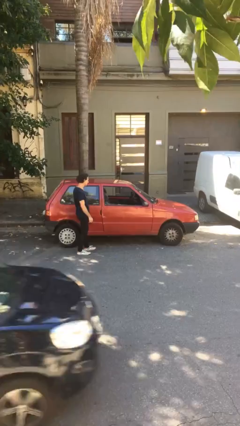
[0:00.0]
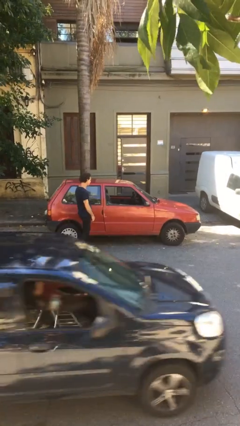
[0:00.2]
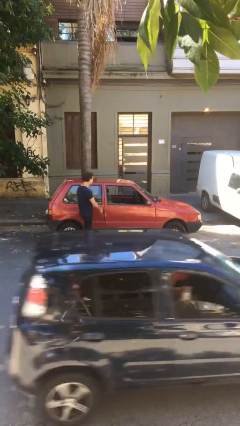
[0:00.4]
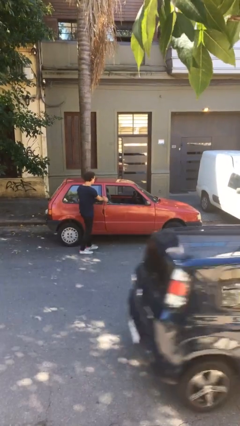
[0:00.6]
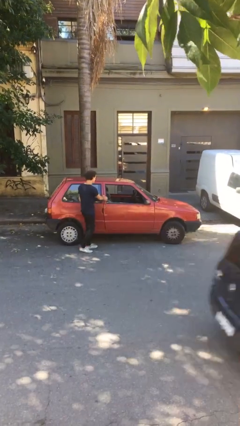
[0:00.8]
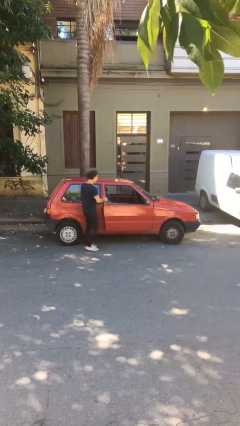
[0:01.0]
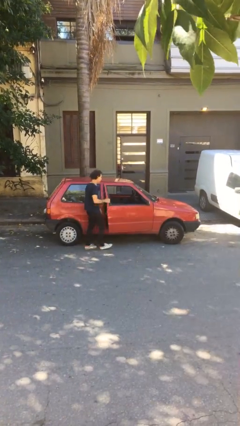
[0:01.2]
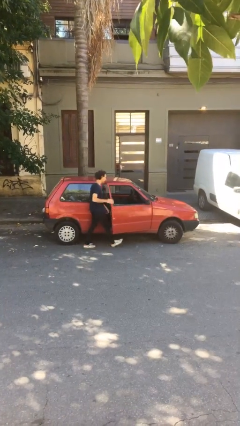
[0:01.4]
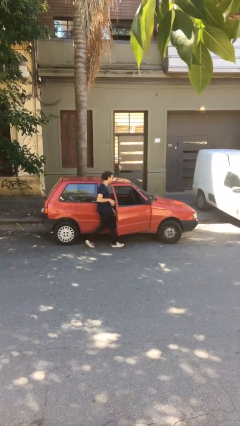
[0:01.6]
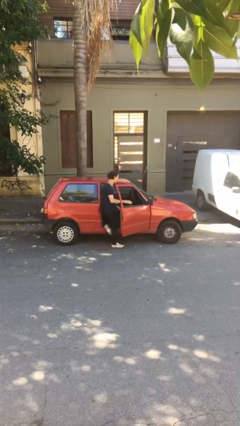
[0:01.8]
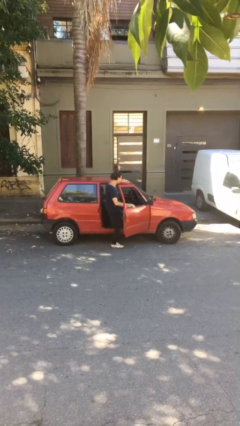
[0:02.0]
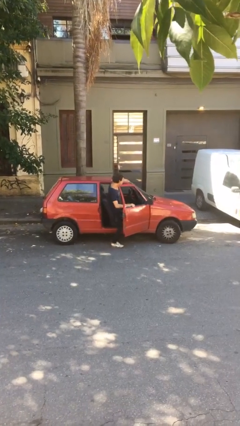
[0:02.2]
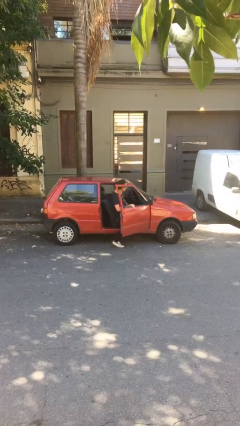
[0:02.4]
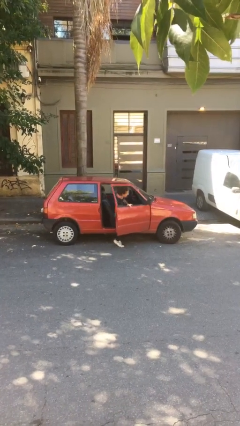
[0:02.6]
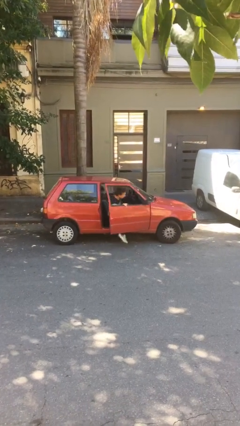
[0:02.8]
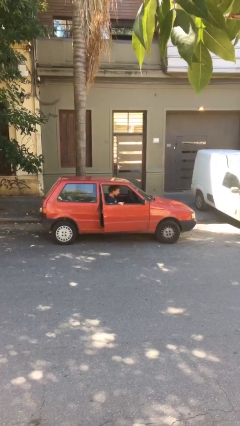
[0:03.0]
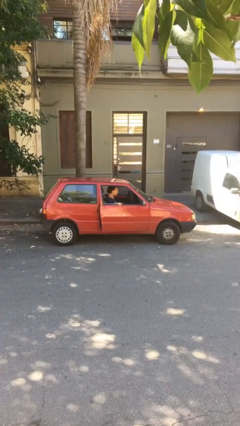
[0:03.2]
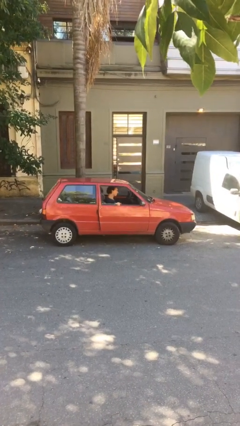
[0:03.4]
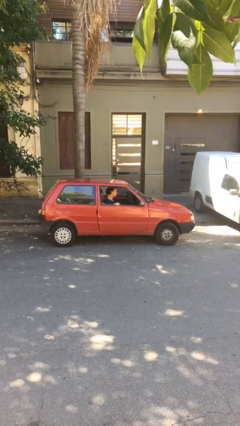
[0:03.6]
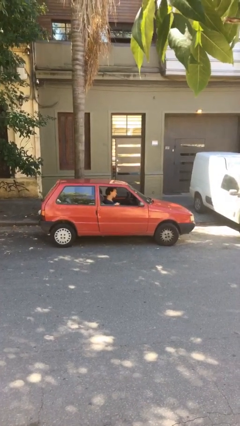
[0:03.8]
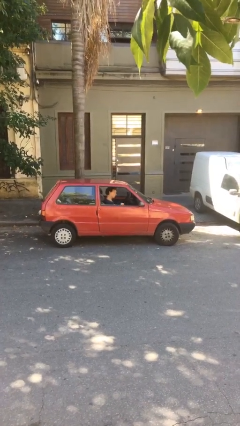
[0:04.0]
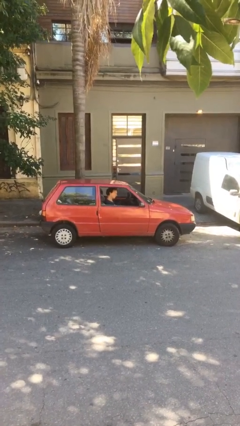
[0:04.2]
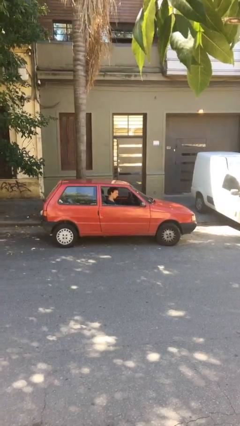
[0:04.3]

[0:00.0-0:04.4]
car picks up person

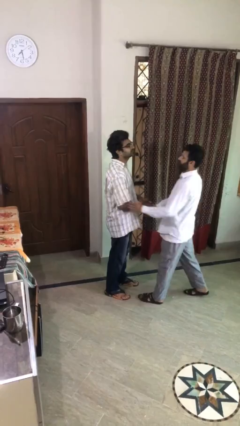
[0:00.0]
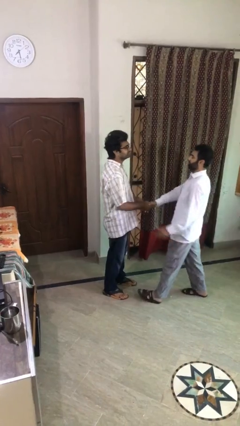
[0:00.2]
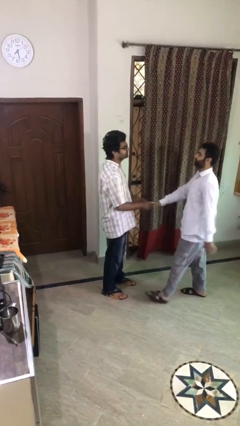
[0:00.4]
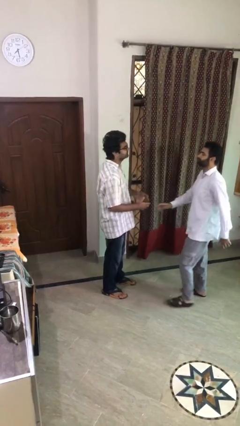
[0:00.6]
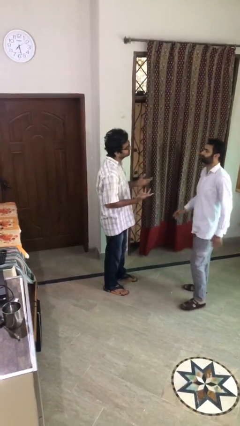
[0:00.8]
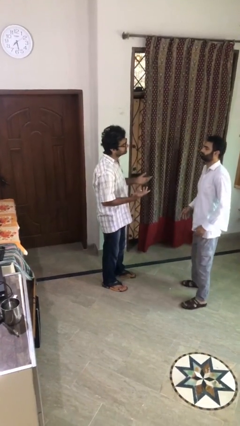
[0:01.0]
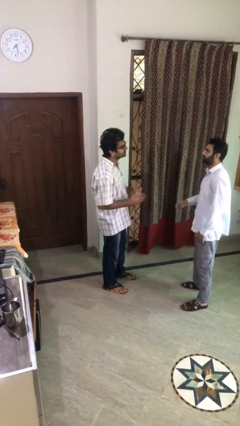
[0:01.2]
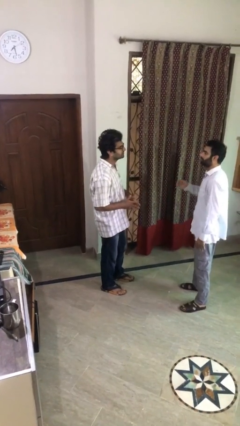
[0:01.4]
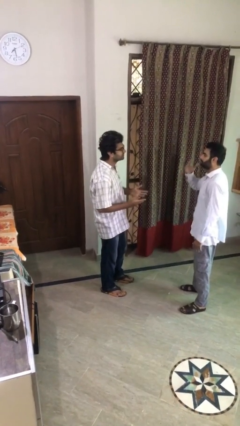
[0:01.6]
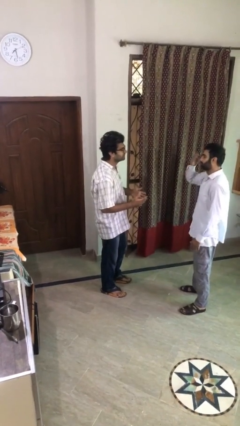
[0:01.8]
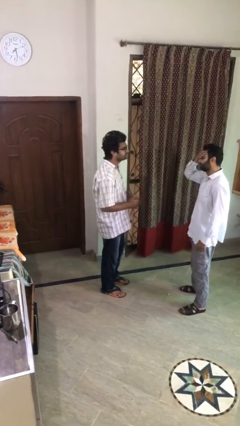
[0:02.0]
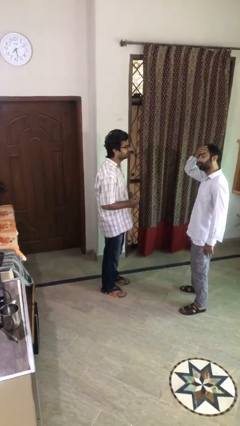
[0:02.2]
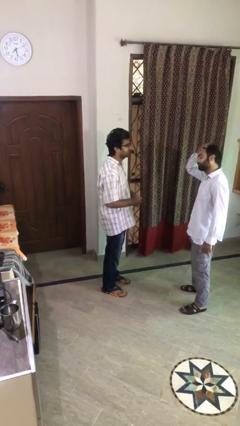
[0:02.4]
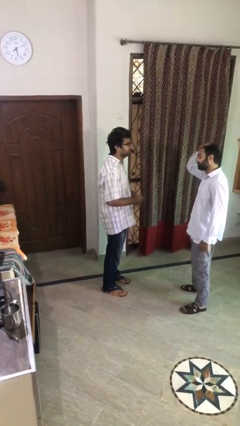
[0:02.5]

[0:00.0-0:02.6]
person talks to person

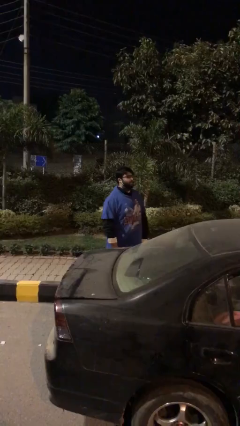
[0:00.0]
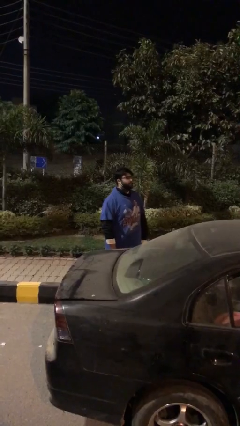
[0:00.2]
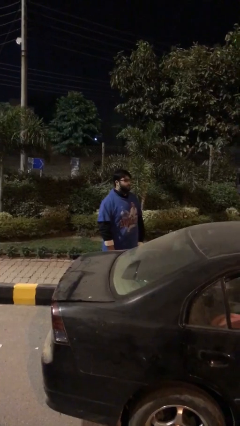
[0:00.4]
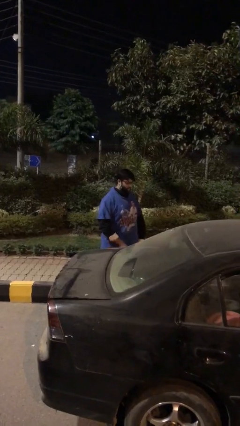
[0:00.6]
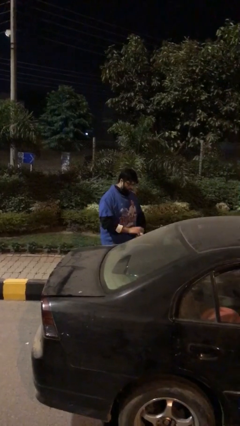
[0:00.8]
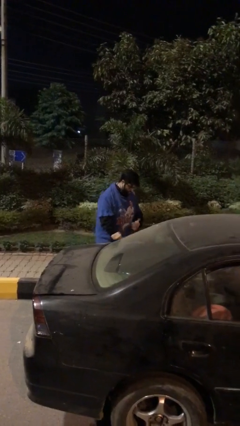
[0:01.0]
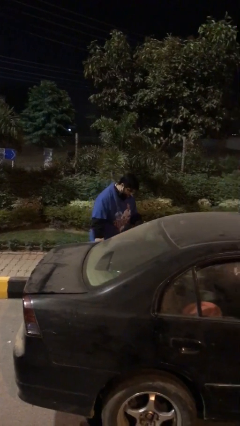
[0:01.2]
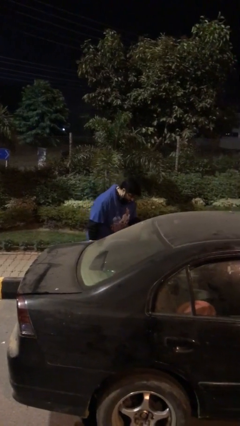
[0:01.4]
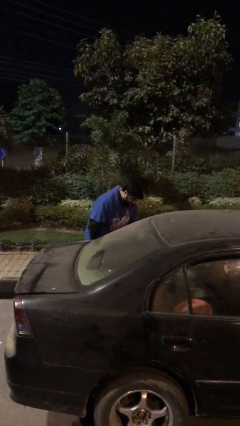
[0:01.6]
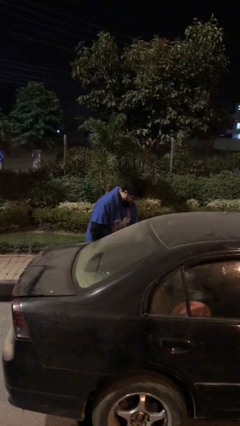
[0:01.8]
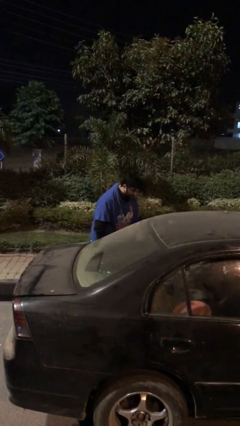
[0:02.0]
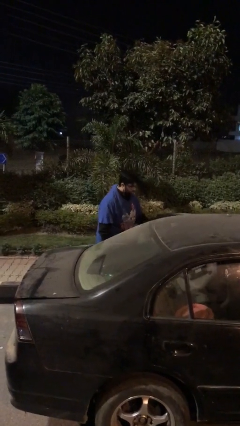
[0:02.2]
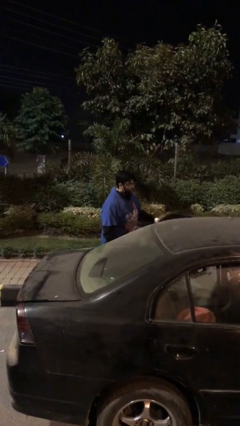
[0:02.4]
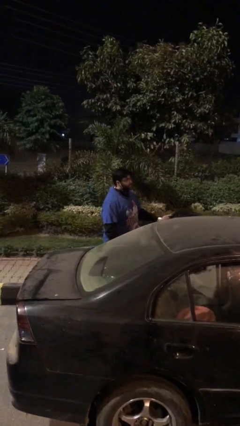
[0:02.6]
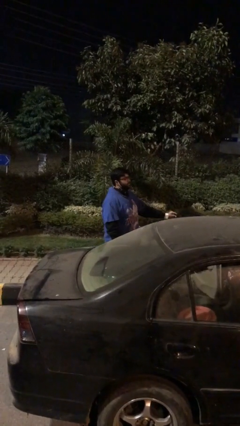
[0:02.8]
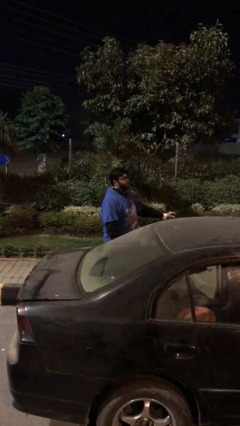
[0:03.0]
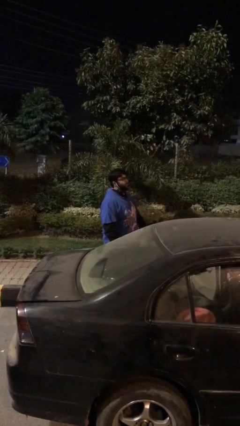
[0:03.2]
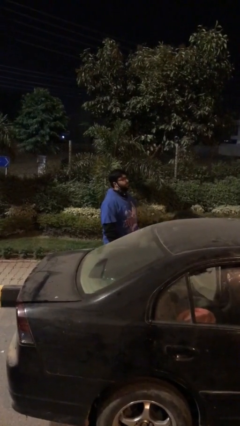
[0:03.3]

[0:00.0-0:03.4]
person opens car door

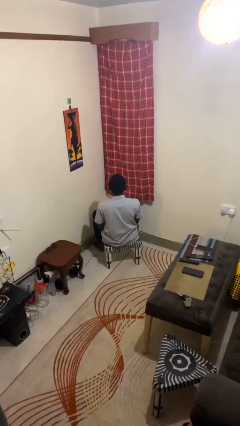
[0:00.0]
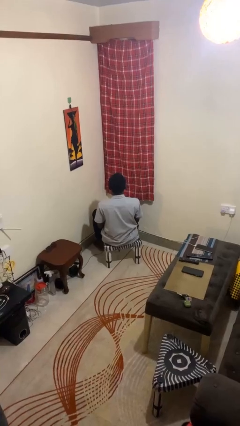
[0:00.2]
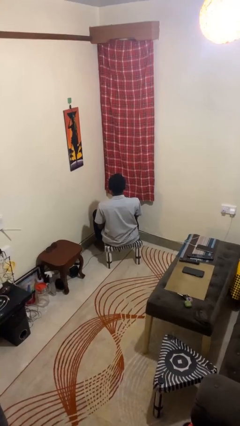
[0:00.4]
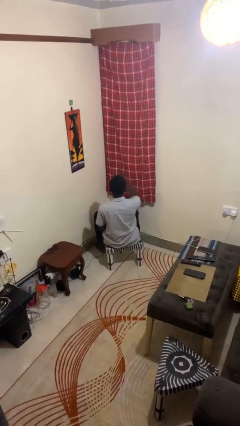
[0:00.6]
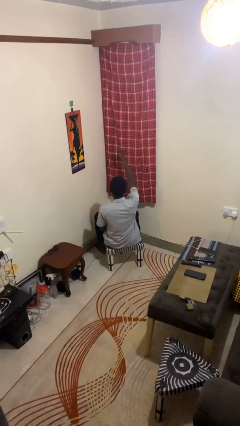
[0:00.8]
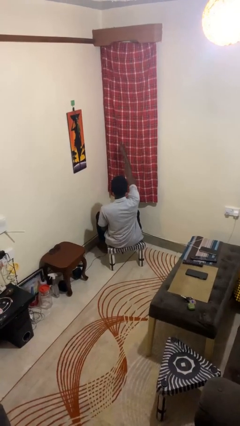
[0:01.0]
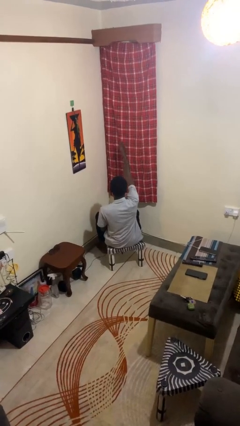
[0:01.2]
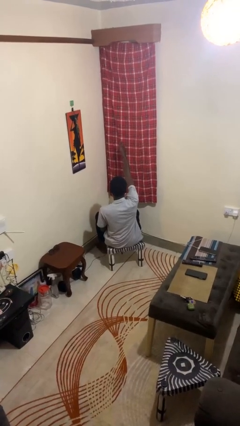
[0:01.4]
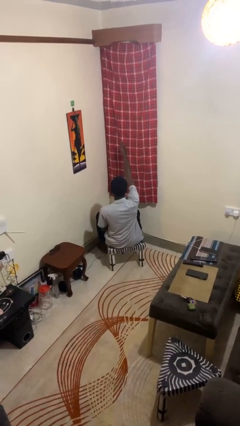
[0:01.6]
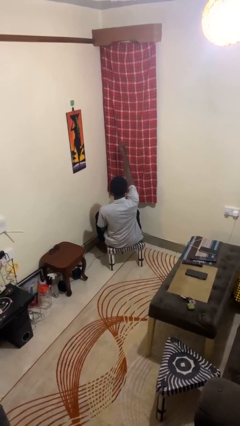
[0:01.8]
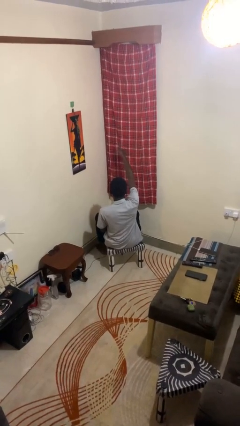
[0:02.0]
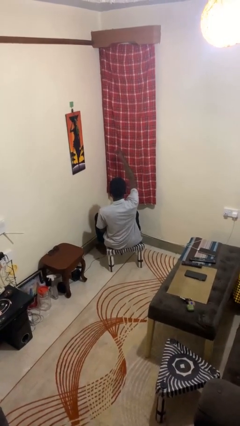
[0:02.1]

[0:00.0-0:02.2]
person gestures thumbs up

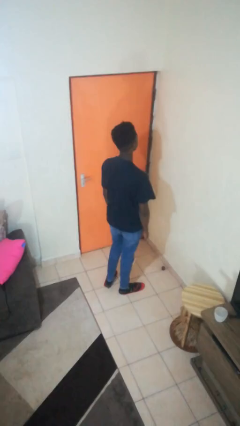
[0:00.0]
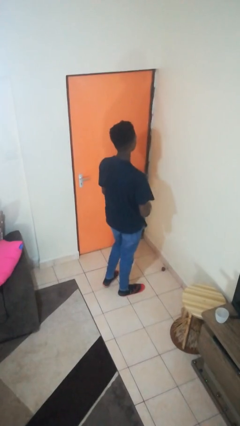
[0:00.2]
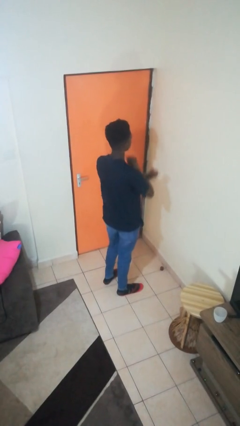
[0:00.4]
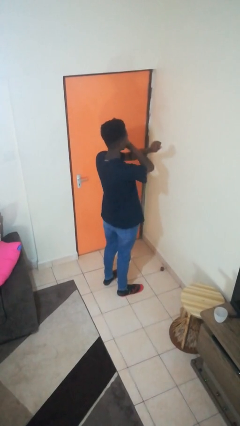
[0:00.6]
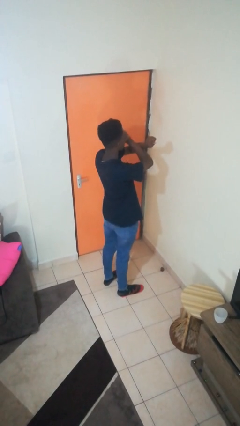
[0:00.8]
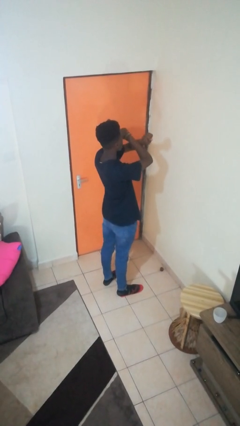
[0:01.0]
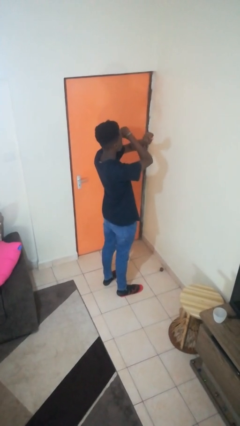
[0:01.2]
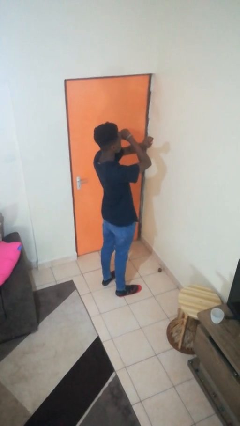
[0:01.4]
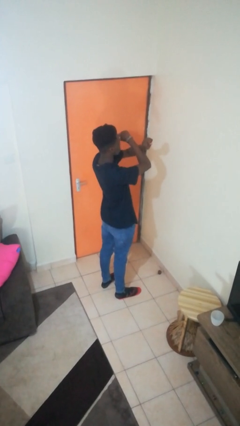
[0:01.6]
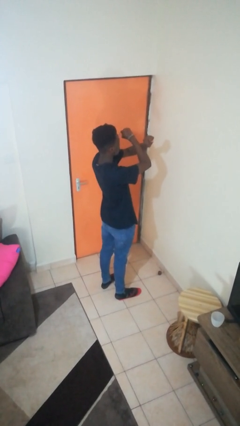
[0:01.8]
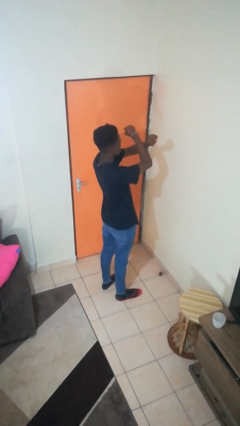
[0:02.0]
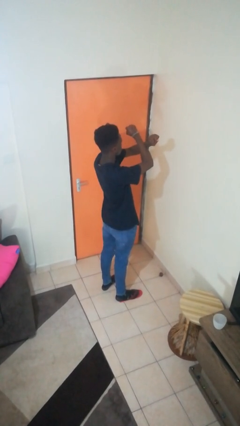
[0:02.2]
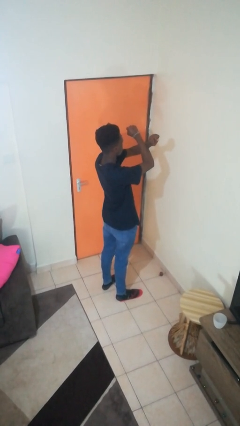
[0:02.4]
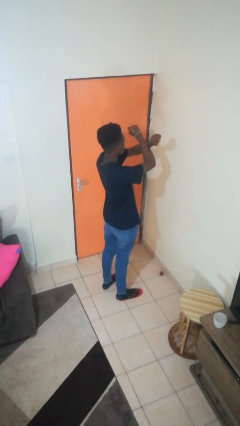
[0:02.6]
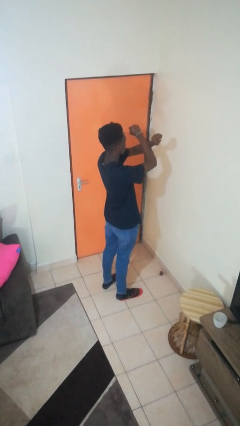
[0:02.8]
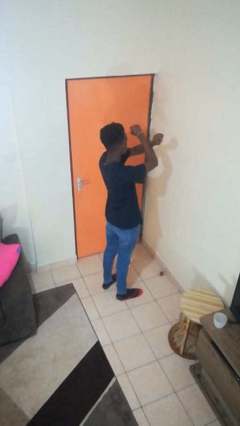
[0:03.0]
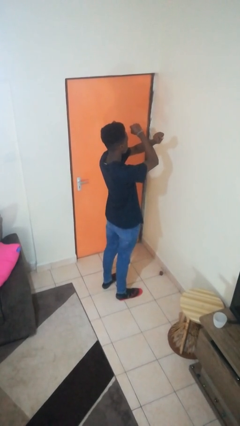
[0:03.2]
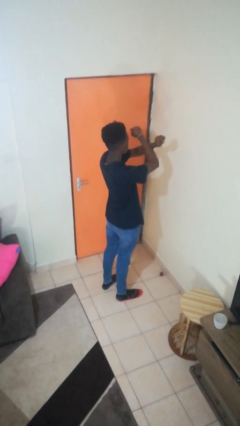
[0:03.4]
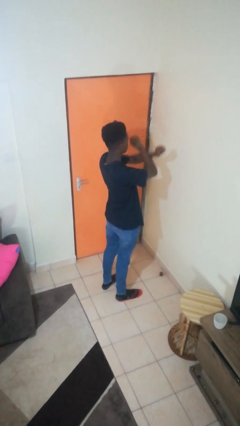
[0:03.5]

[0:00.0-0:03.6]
person gestures arms x

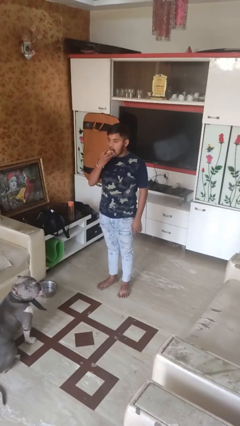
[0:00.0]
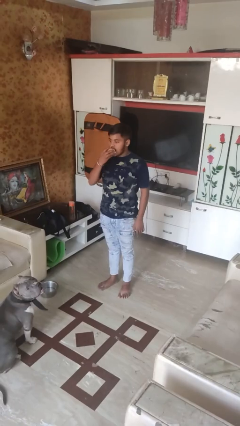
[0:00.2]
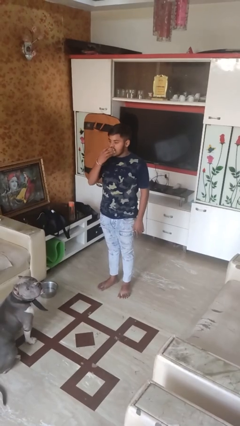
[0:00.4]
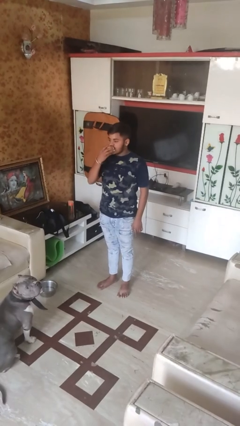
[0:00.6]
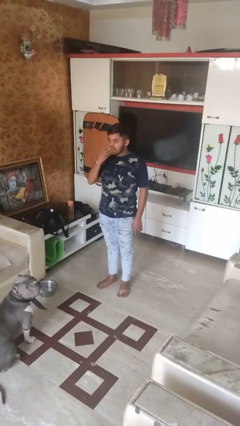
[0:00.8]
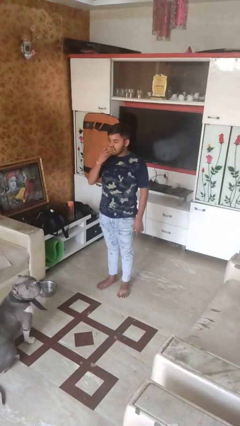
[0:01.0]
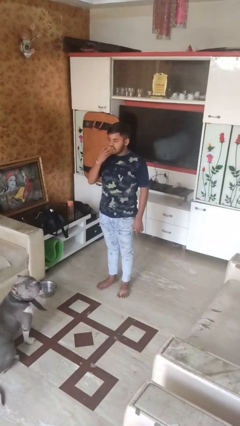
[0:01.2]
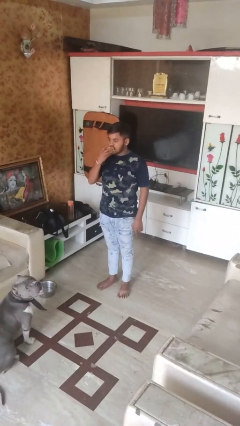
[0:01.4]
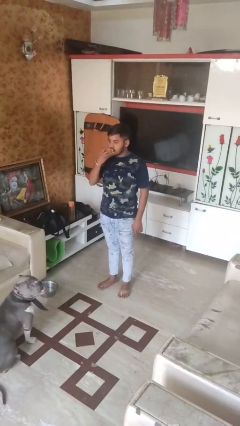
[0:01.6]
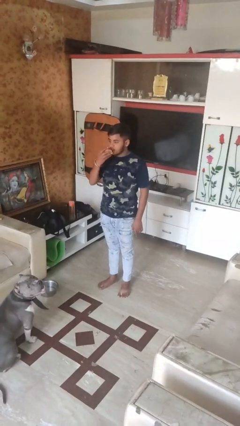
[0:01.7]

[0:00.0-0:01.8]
person eats apple
